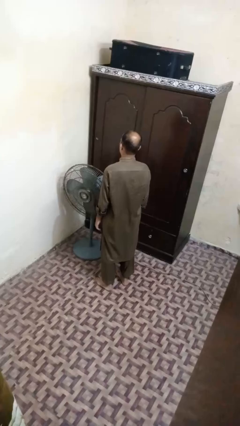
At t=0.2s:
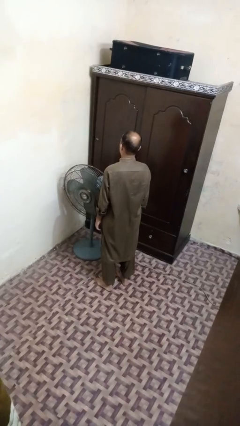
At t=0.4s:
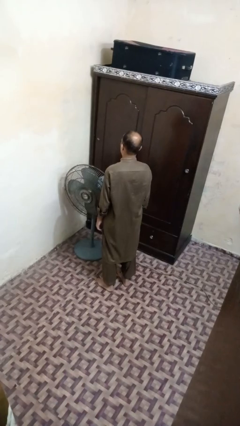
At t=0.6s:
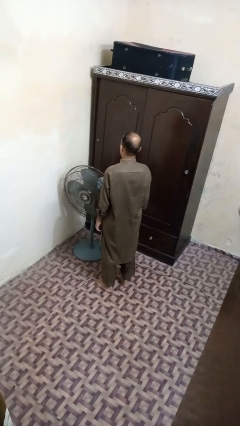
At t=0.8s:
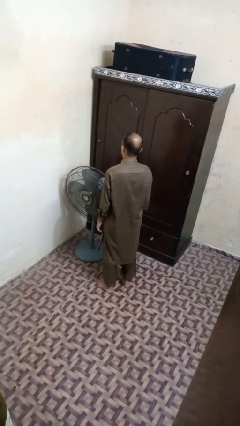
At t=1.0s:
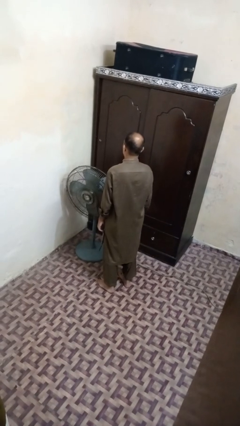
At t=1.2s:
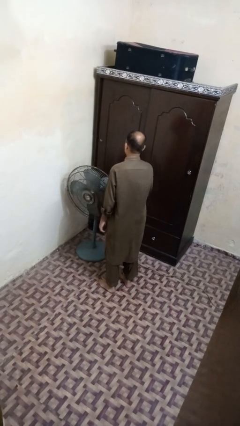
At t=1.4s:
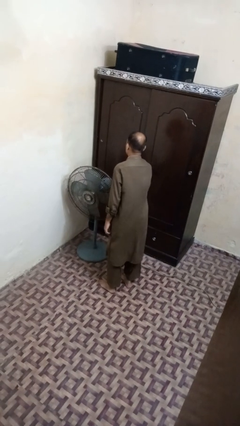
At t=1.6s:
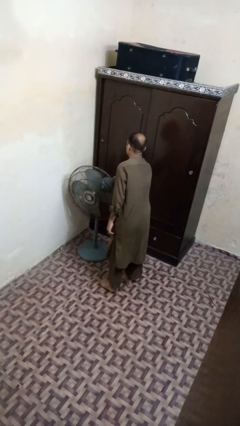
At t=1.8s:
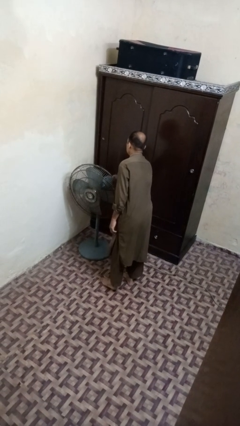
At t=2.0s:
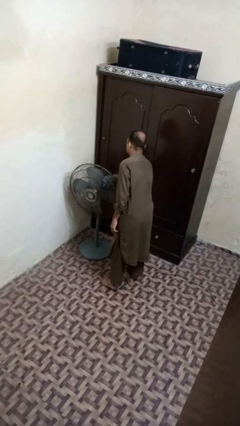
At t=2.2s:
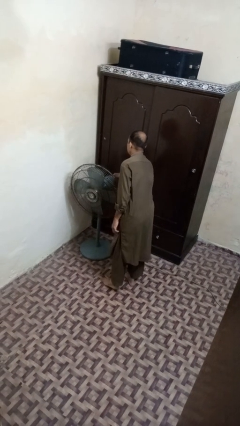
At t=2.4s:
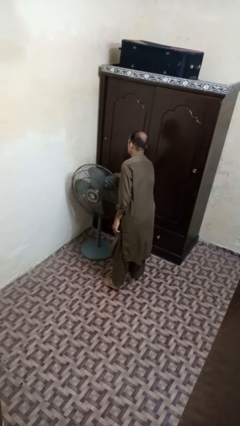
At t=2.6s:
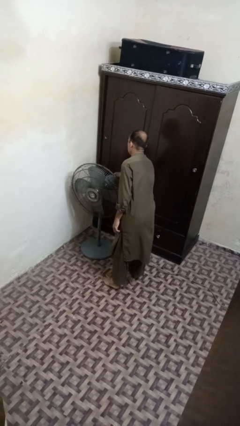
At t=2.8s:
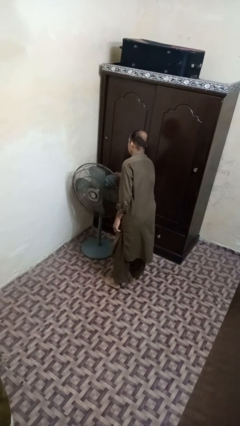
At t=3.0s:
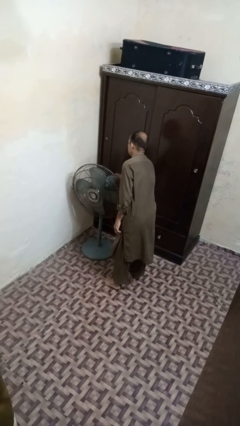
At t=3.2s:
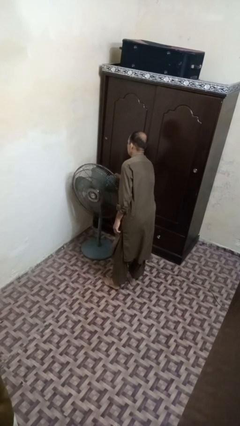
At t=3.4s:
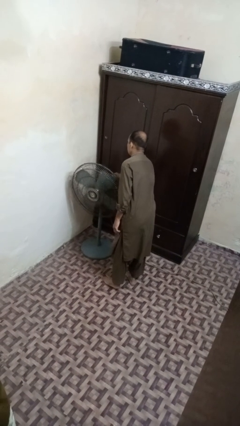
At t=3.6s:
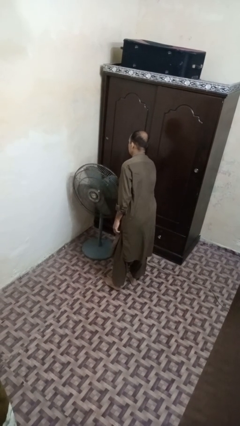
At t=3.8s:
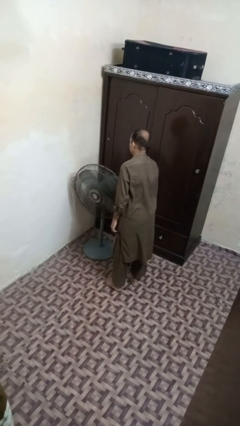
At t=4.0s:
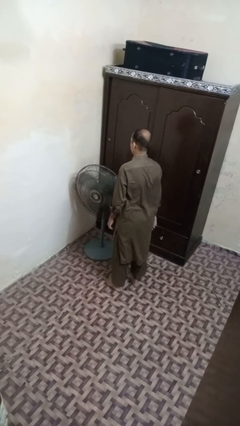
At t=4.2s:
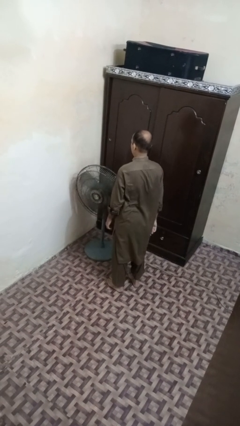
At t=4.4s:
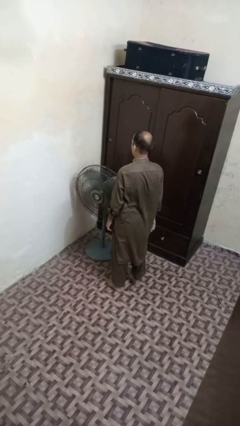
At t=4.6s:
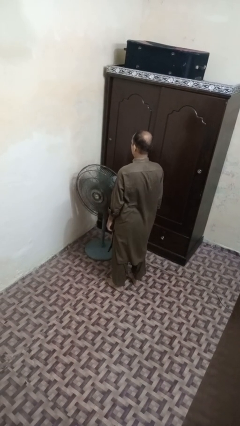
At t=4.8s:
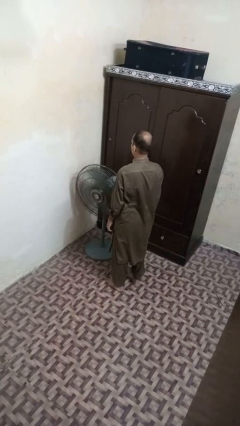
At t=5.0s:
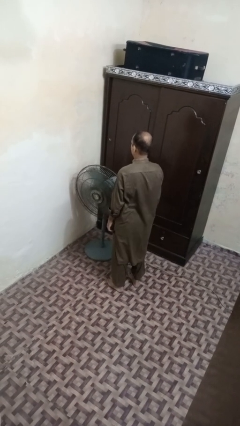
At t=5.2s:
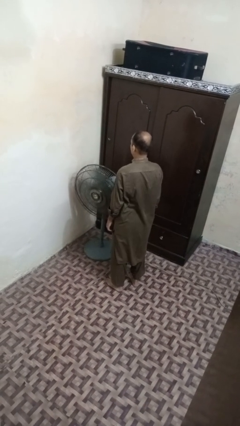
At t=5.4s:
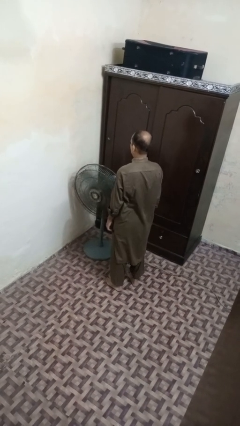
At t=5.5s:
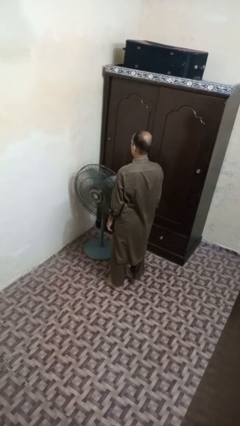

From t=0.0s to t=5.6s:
person turns on fan

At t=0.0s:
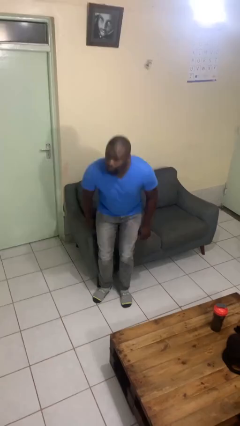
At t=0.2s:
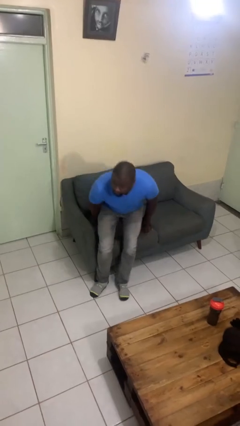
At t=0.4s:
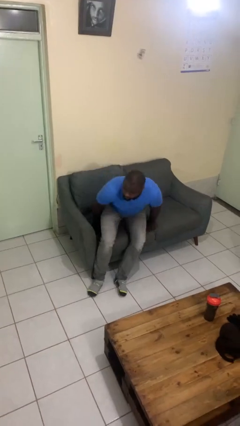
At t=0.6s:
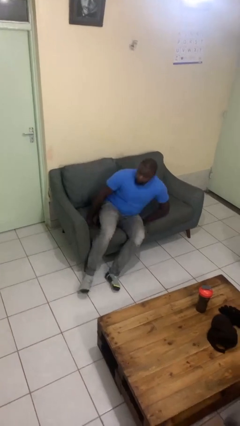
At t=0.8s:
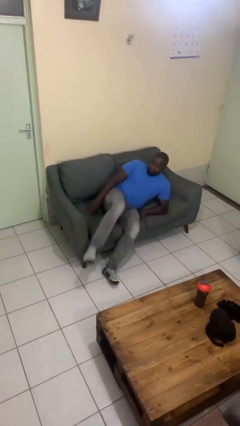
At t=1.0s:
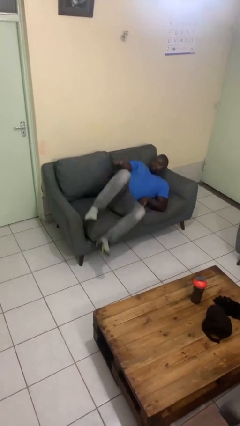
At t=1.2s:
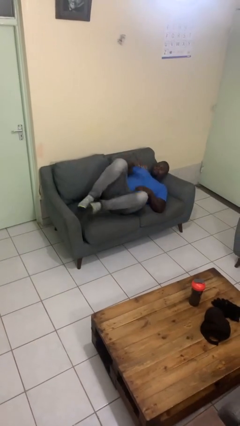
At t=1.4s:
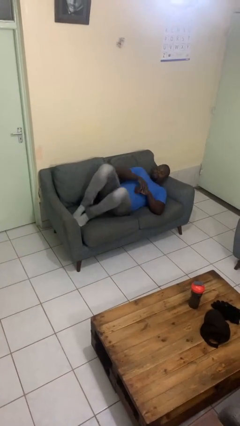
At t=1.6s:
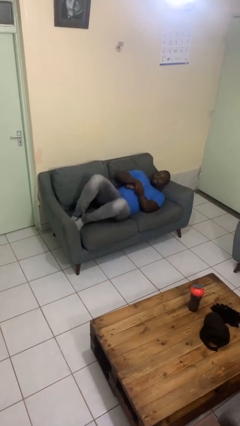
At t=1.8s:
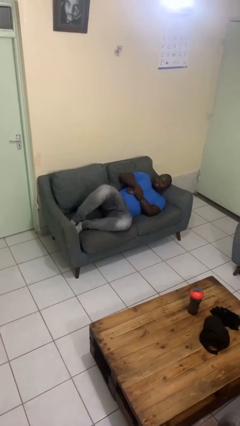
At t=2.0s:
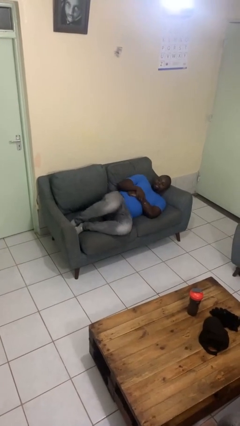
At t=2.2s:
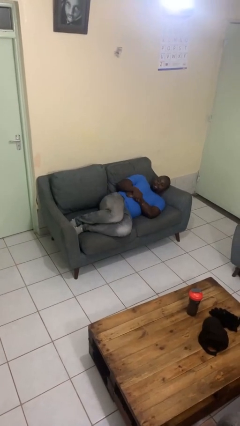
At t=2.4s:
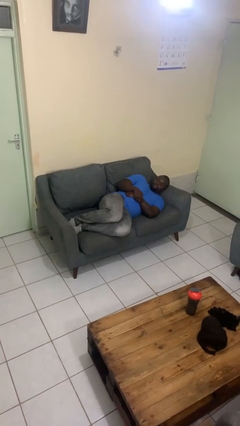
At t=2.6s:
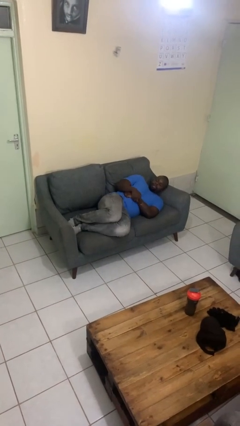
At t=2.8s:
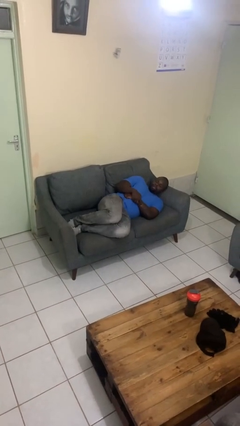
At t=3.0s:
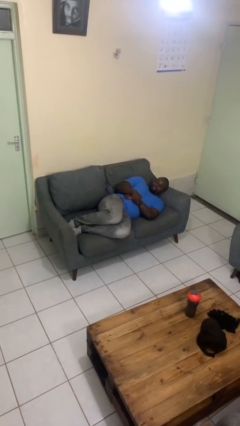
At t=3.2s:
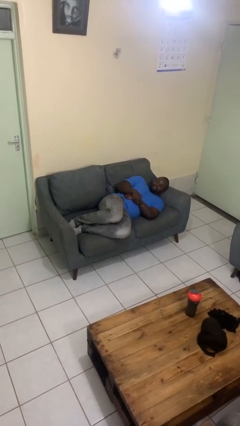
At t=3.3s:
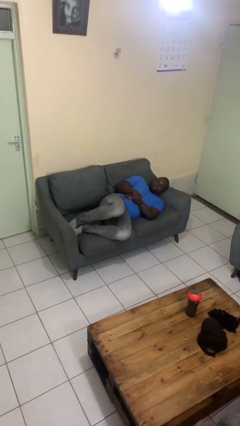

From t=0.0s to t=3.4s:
person lies down on couch

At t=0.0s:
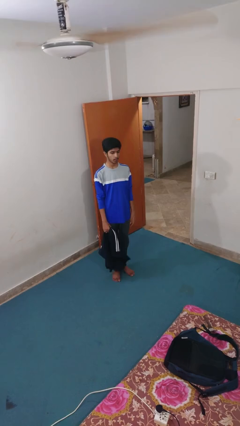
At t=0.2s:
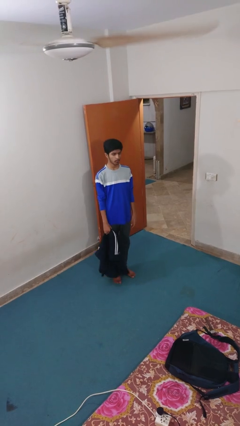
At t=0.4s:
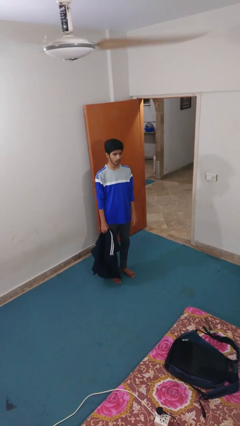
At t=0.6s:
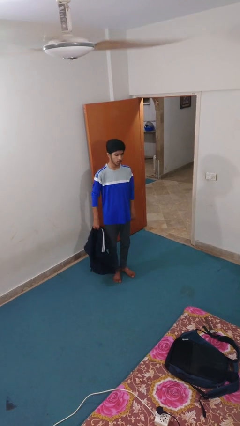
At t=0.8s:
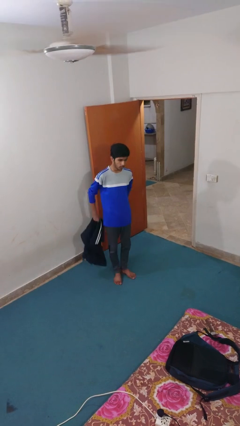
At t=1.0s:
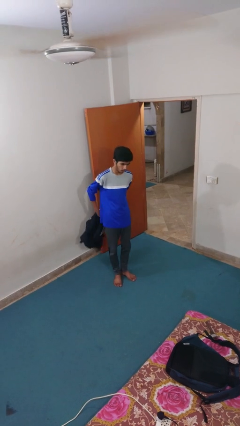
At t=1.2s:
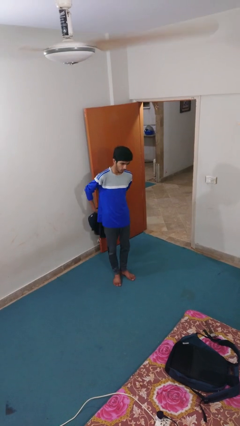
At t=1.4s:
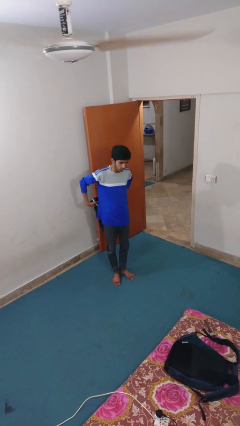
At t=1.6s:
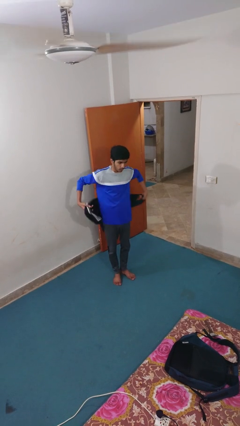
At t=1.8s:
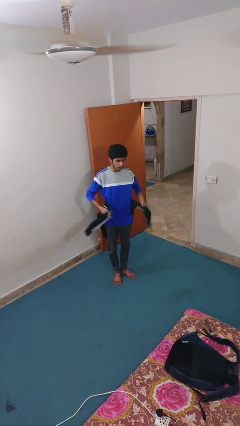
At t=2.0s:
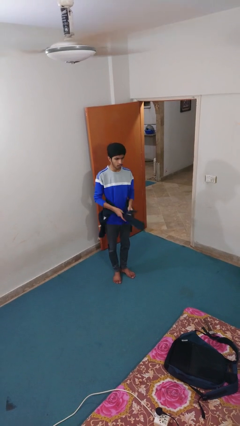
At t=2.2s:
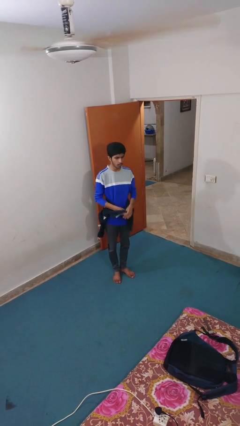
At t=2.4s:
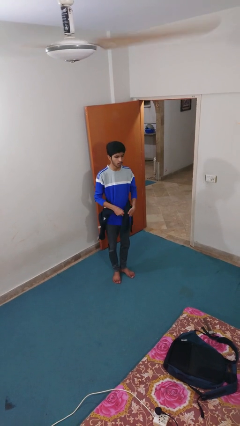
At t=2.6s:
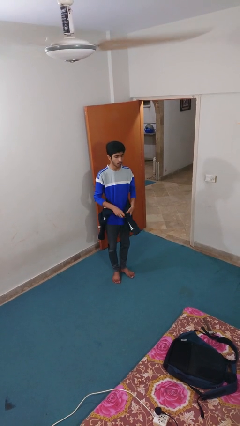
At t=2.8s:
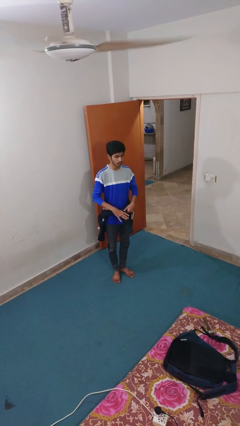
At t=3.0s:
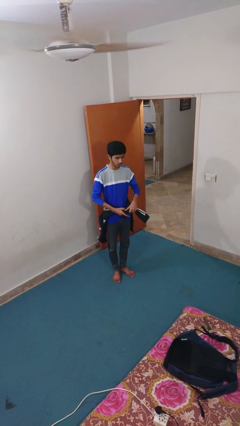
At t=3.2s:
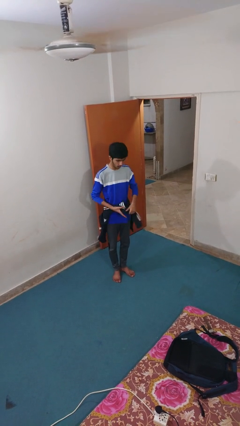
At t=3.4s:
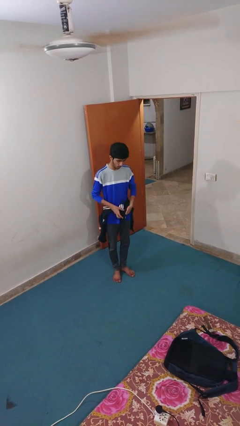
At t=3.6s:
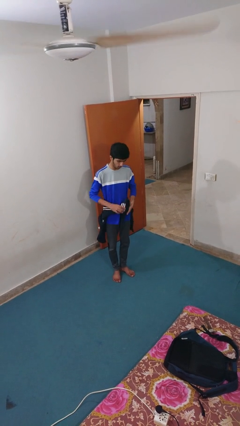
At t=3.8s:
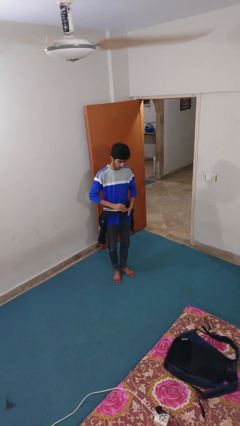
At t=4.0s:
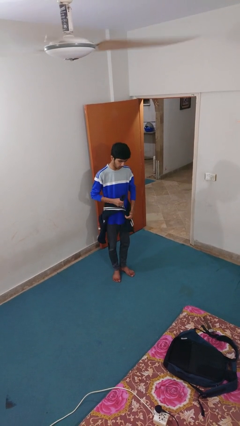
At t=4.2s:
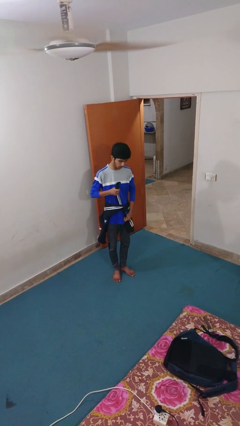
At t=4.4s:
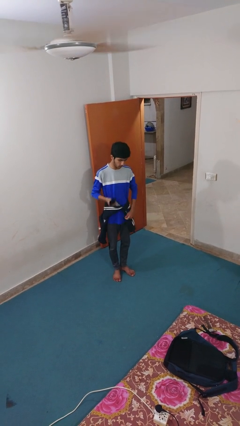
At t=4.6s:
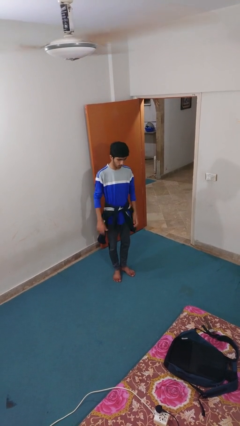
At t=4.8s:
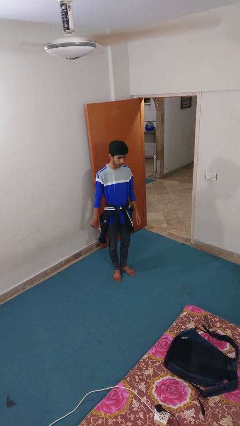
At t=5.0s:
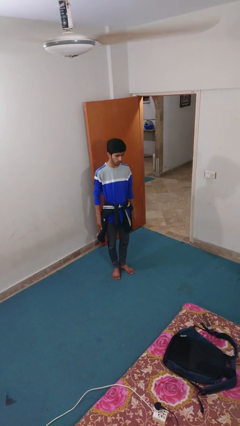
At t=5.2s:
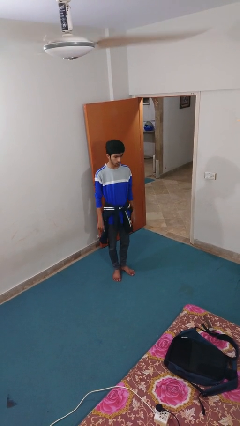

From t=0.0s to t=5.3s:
person ties jacket around waist

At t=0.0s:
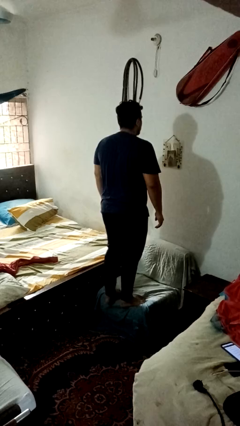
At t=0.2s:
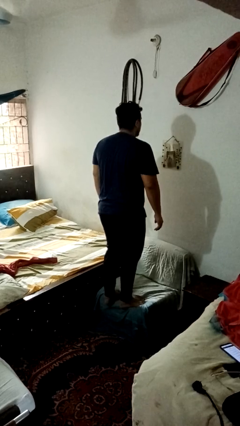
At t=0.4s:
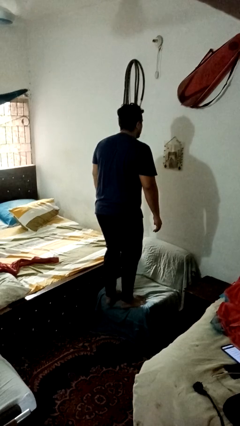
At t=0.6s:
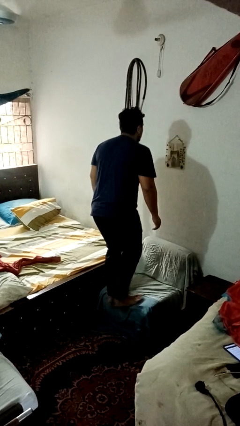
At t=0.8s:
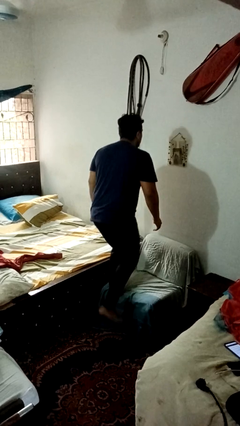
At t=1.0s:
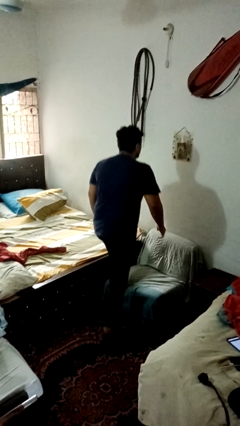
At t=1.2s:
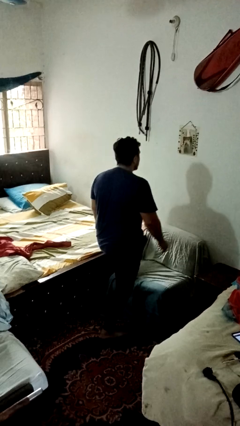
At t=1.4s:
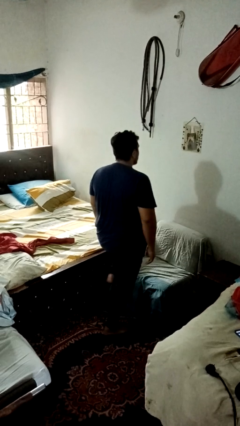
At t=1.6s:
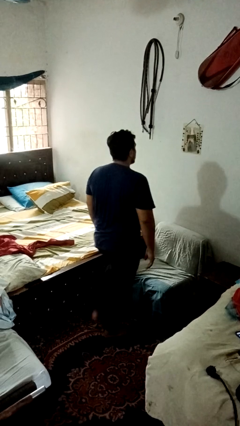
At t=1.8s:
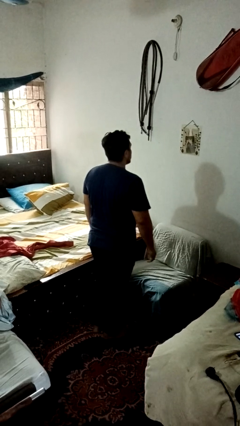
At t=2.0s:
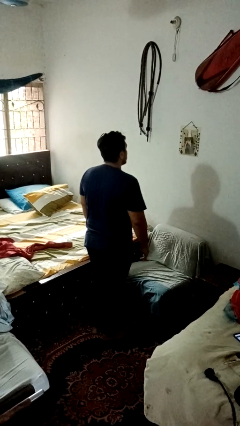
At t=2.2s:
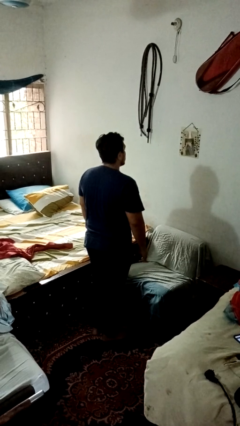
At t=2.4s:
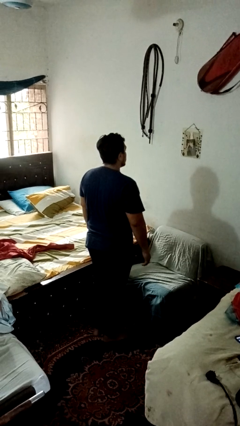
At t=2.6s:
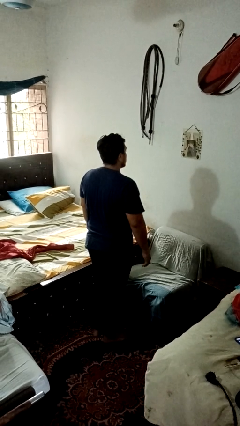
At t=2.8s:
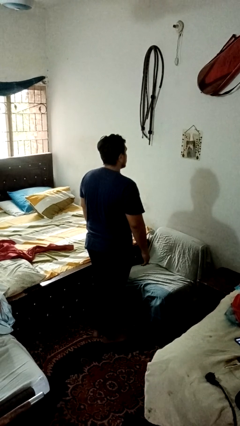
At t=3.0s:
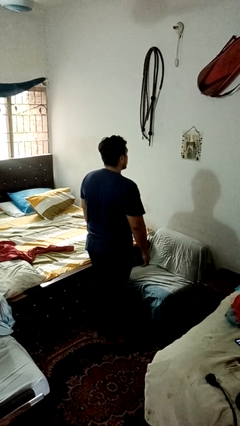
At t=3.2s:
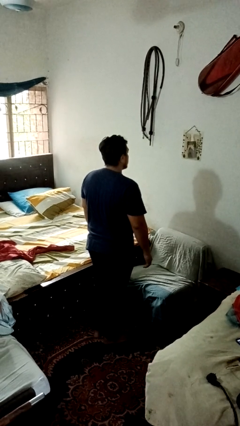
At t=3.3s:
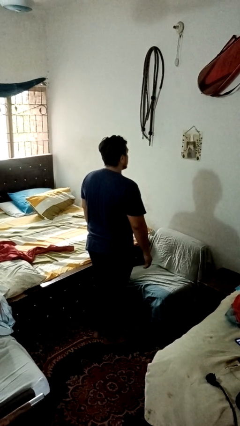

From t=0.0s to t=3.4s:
person climbs off couch

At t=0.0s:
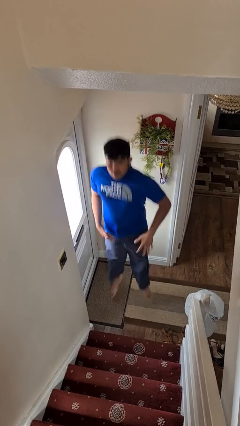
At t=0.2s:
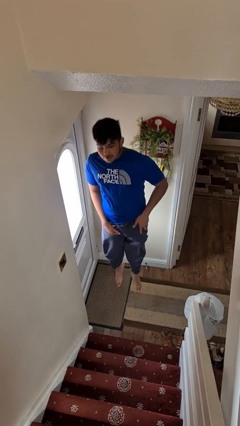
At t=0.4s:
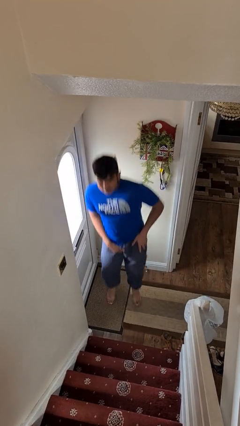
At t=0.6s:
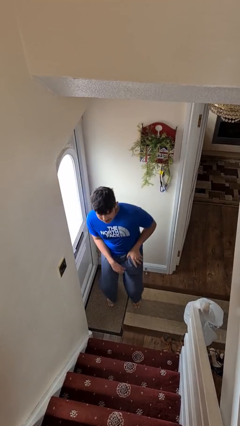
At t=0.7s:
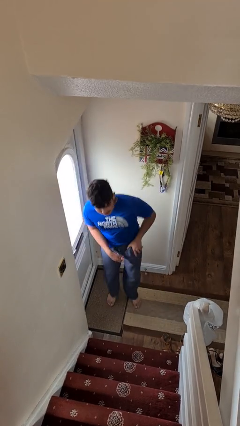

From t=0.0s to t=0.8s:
person jumps
